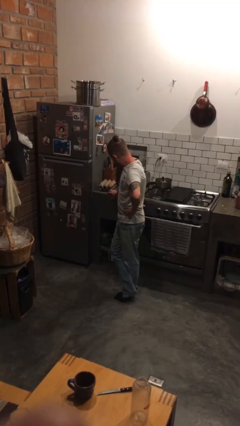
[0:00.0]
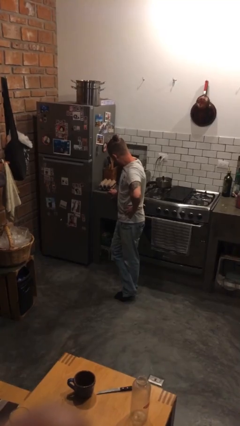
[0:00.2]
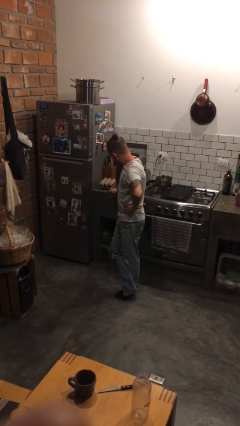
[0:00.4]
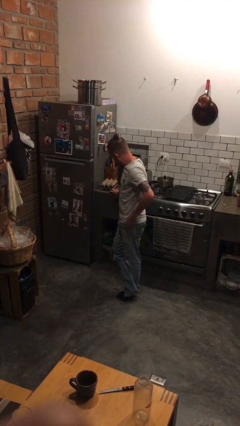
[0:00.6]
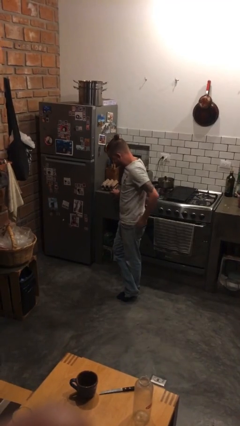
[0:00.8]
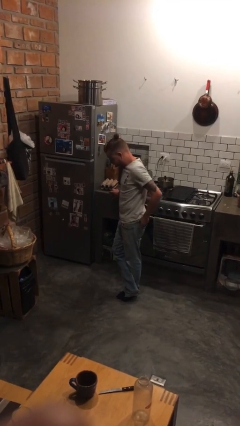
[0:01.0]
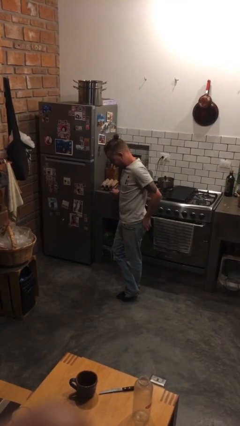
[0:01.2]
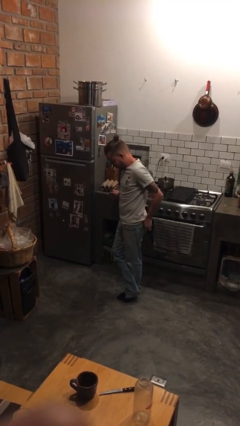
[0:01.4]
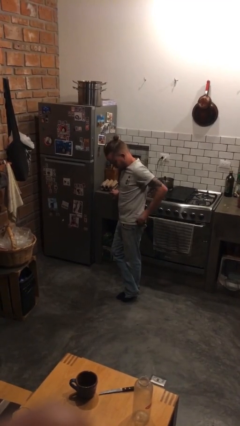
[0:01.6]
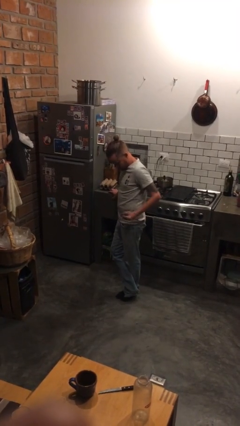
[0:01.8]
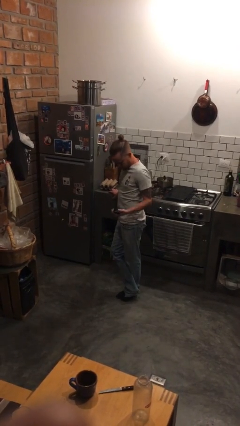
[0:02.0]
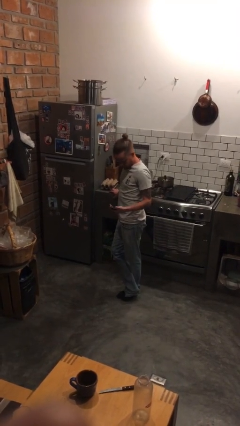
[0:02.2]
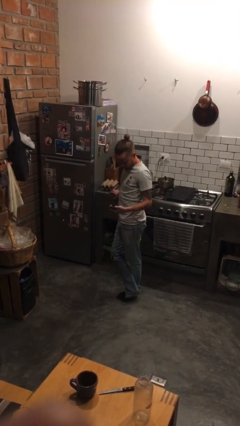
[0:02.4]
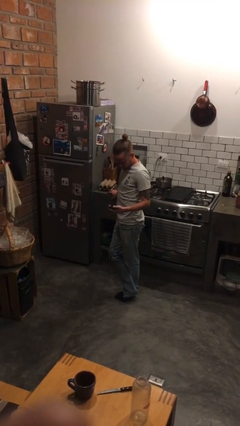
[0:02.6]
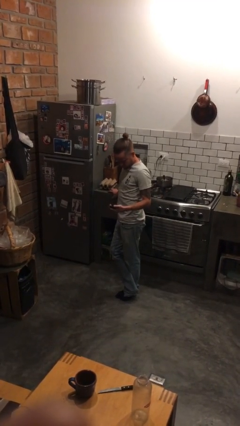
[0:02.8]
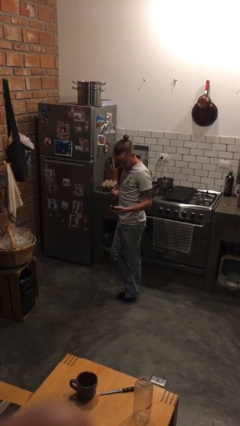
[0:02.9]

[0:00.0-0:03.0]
person takes phone from pocket

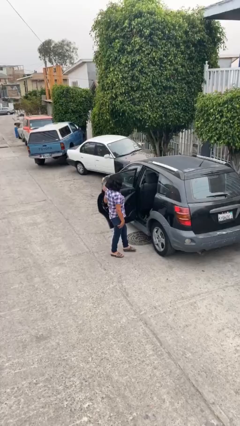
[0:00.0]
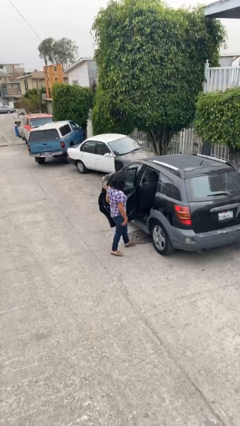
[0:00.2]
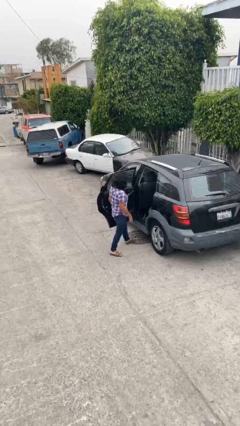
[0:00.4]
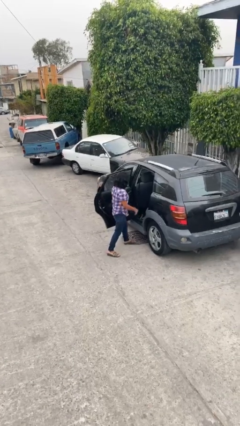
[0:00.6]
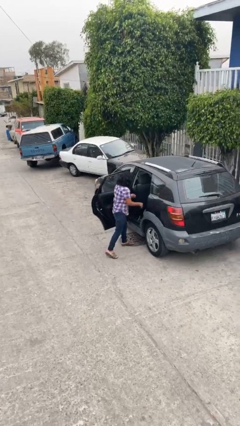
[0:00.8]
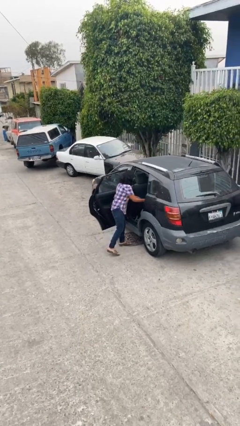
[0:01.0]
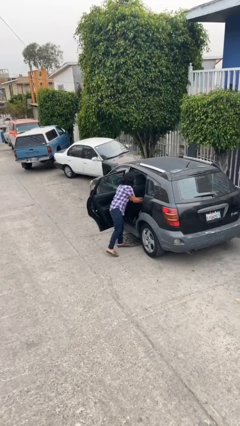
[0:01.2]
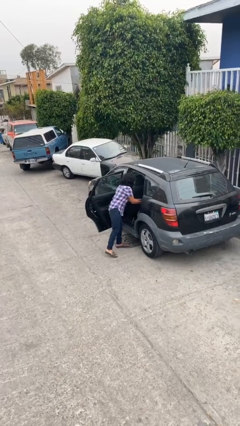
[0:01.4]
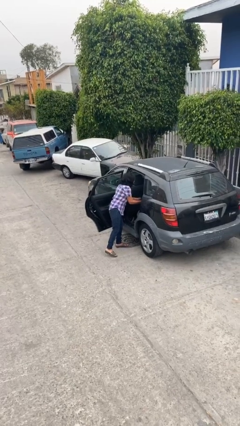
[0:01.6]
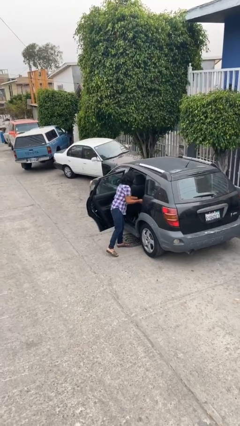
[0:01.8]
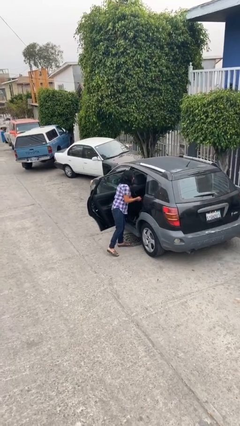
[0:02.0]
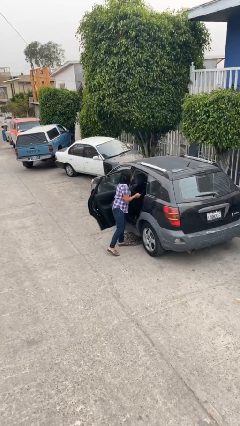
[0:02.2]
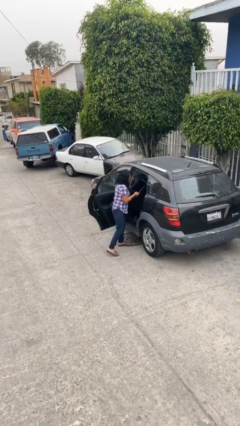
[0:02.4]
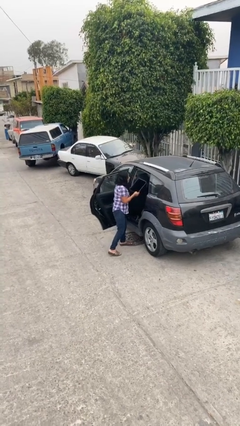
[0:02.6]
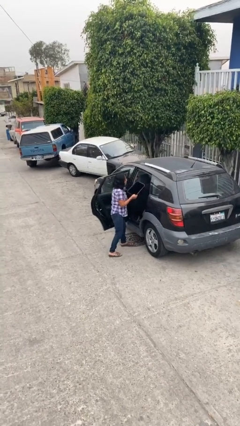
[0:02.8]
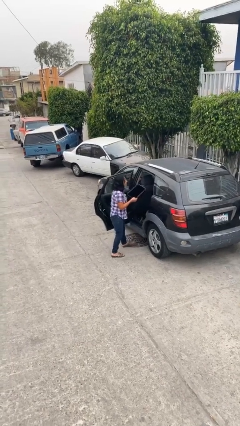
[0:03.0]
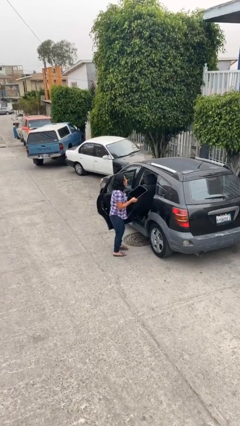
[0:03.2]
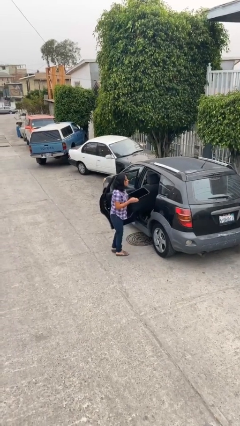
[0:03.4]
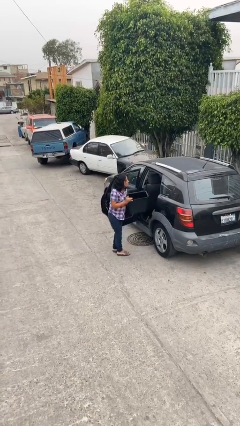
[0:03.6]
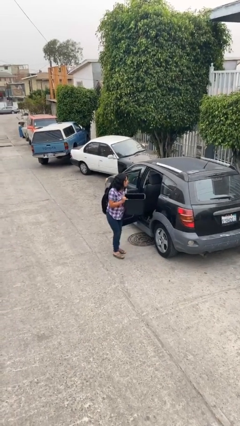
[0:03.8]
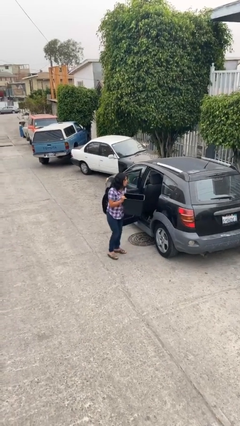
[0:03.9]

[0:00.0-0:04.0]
person unloads car

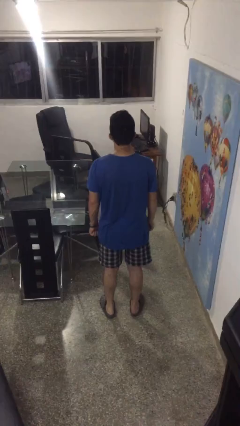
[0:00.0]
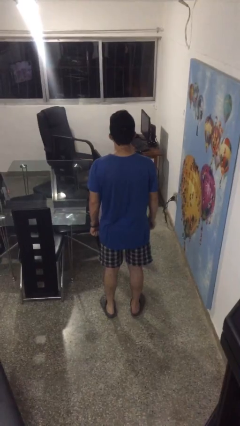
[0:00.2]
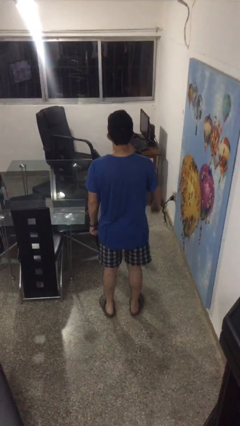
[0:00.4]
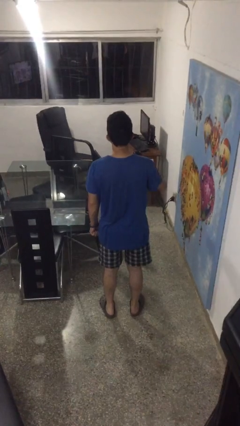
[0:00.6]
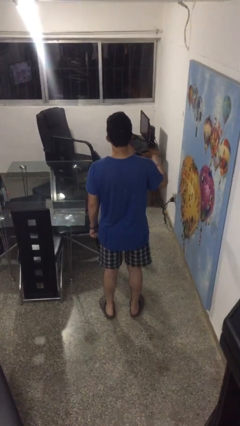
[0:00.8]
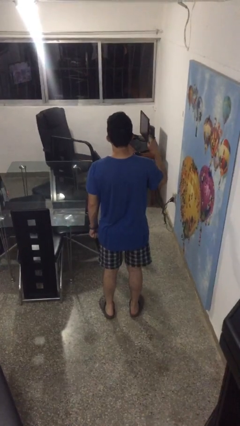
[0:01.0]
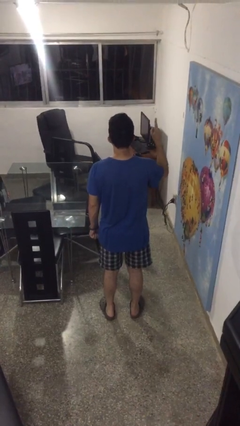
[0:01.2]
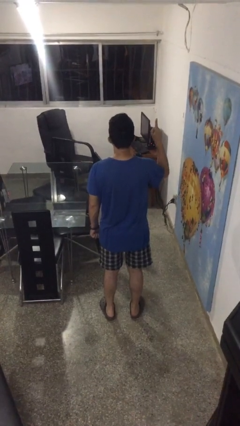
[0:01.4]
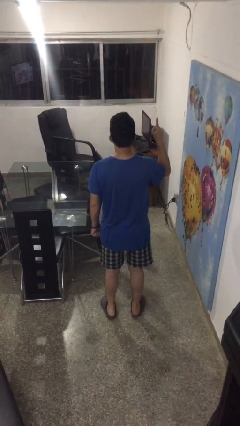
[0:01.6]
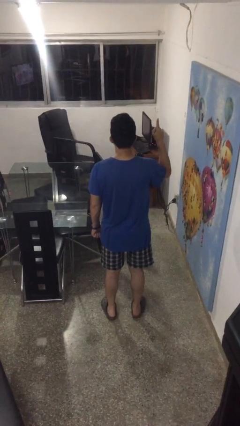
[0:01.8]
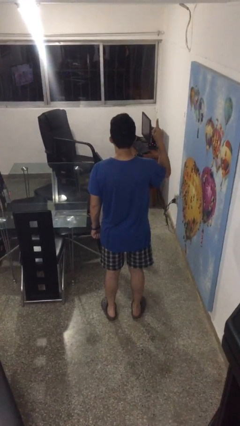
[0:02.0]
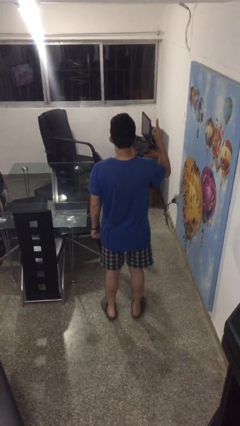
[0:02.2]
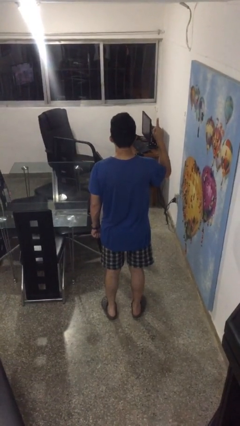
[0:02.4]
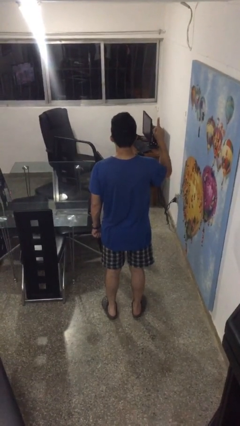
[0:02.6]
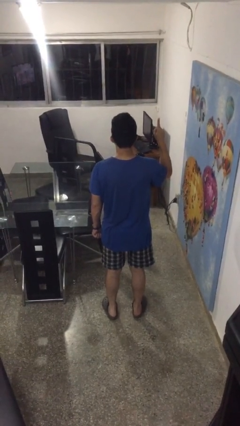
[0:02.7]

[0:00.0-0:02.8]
person gestures number one

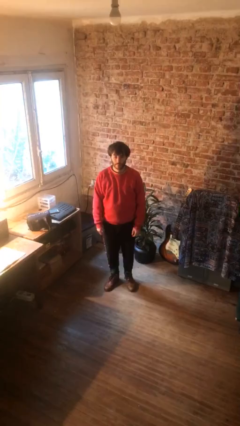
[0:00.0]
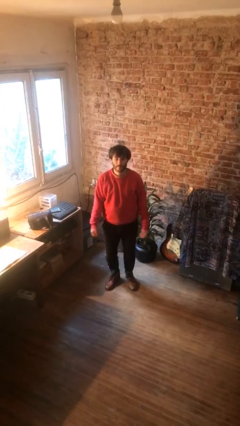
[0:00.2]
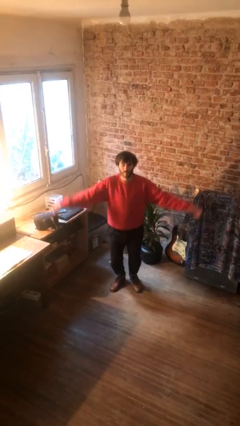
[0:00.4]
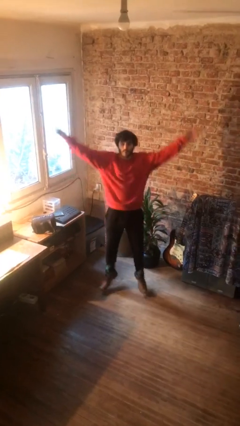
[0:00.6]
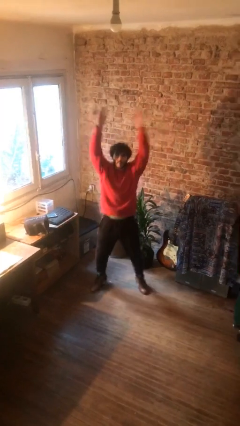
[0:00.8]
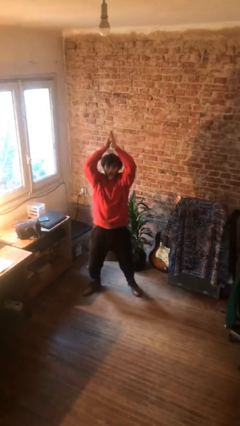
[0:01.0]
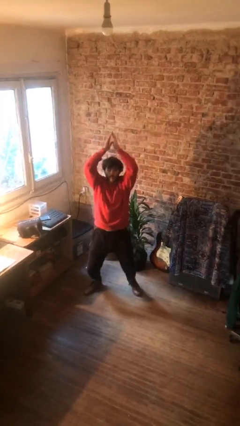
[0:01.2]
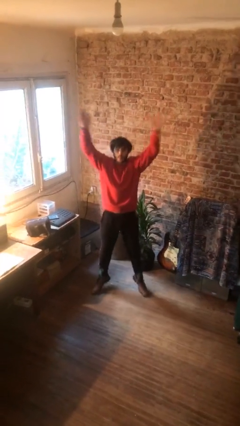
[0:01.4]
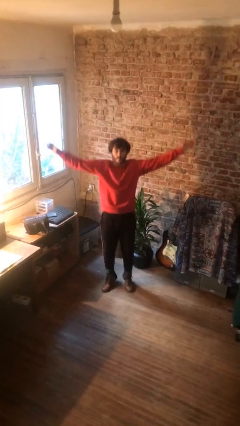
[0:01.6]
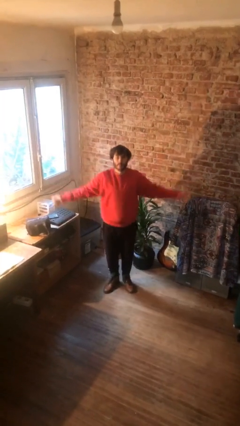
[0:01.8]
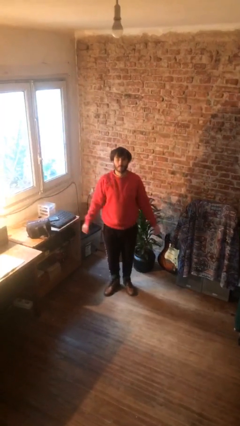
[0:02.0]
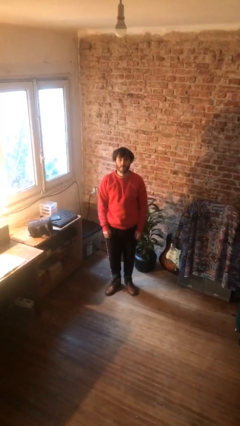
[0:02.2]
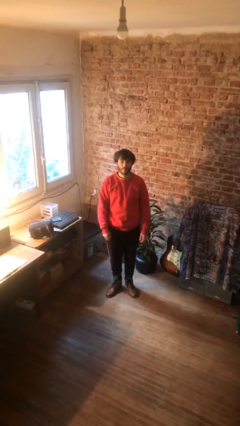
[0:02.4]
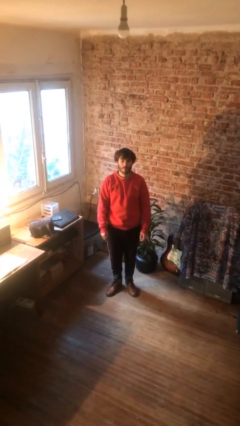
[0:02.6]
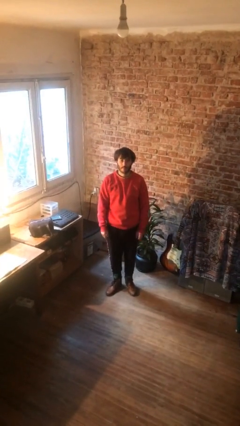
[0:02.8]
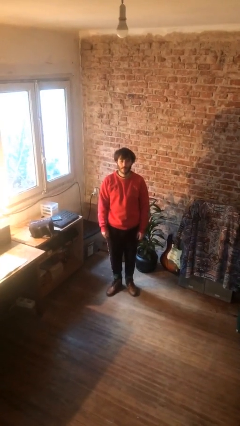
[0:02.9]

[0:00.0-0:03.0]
person exercises with jumping jacks

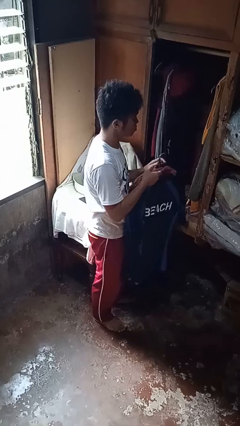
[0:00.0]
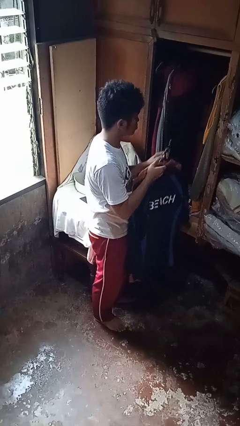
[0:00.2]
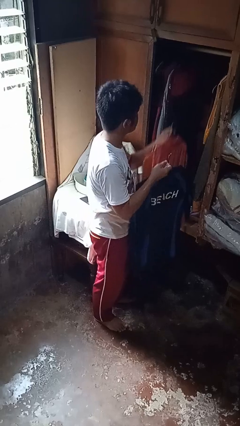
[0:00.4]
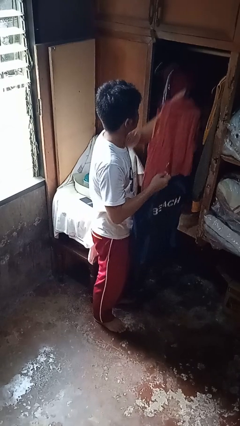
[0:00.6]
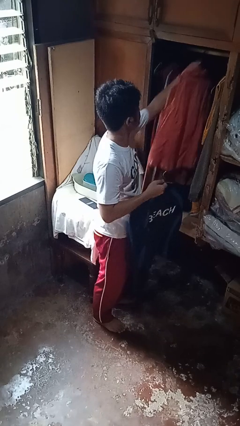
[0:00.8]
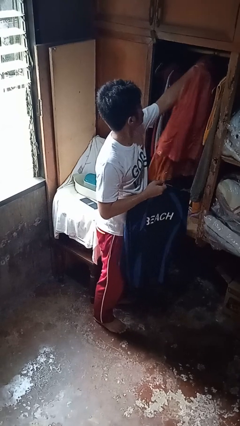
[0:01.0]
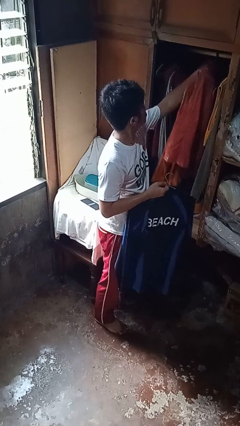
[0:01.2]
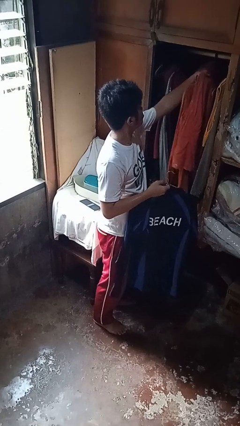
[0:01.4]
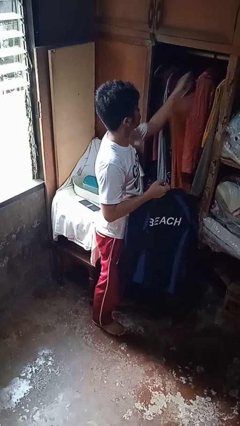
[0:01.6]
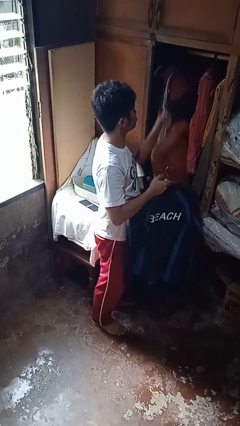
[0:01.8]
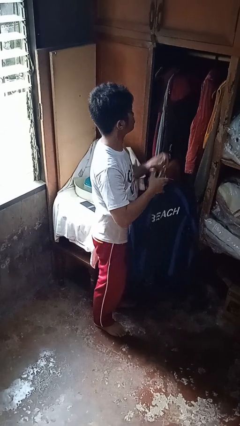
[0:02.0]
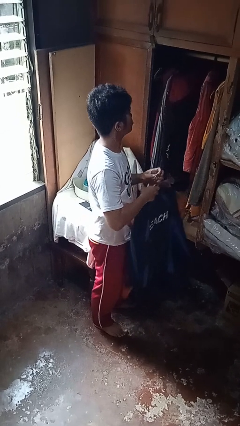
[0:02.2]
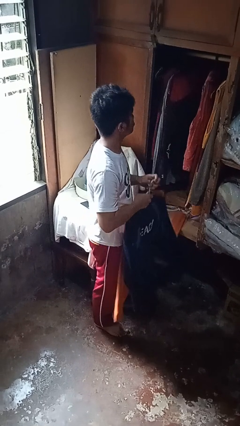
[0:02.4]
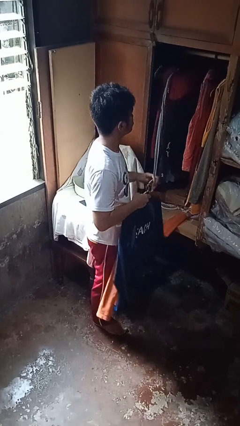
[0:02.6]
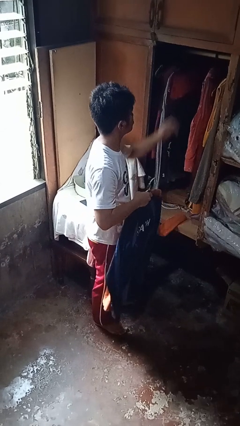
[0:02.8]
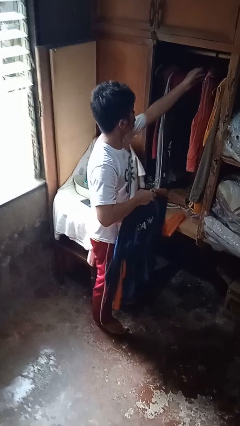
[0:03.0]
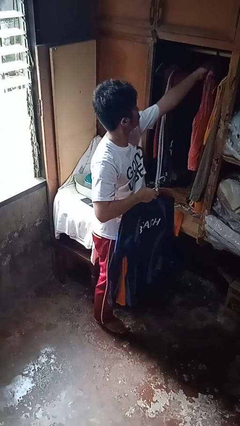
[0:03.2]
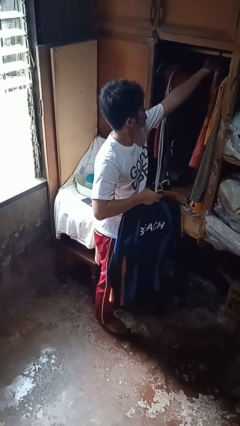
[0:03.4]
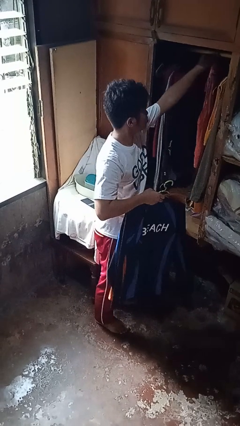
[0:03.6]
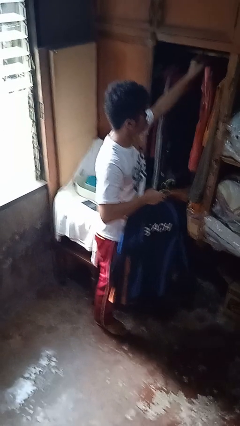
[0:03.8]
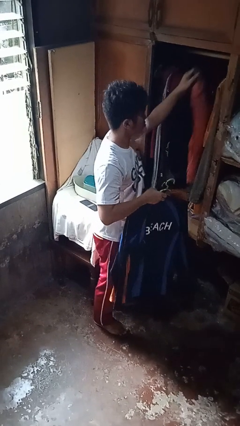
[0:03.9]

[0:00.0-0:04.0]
person puts clothes into closet

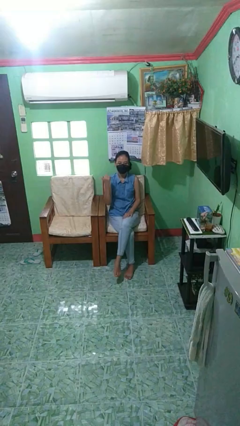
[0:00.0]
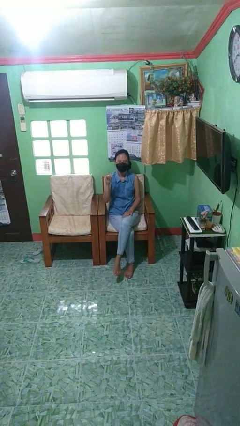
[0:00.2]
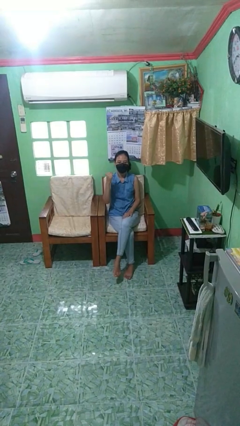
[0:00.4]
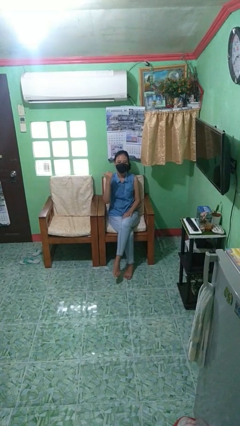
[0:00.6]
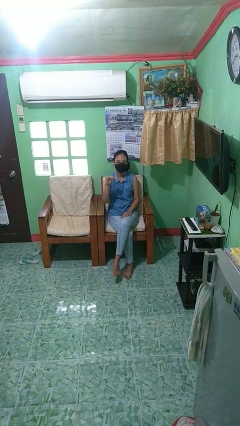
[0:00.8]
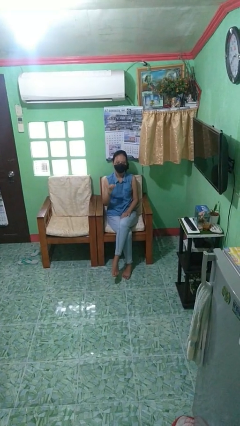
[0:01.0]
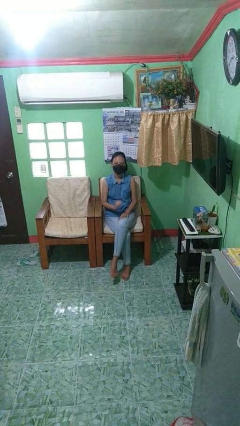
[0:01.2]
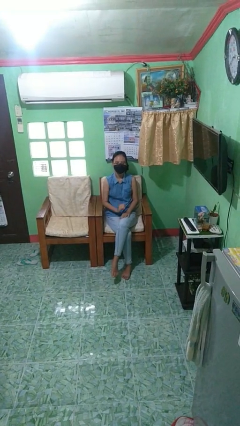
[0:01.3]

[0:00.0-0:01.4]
person gestures hang loose
